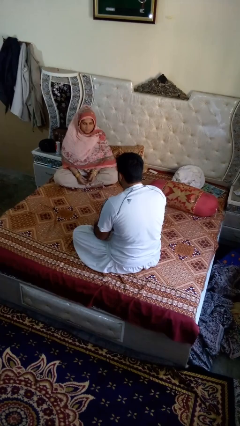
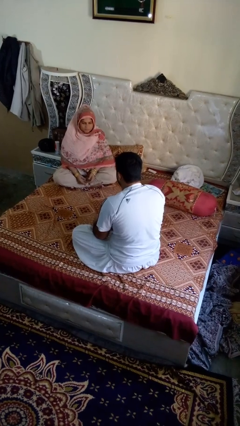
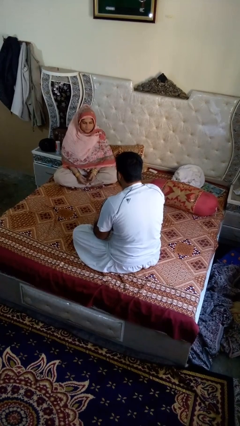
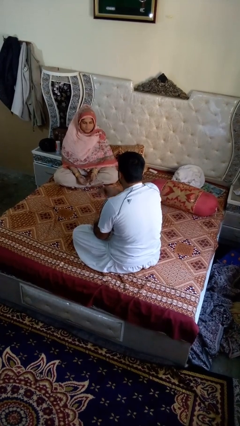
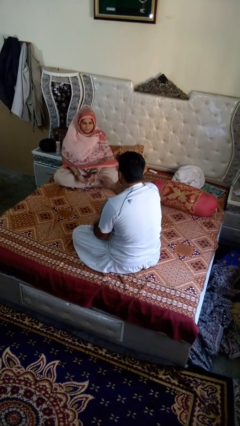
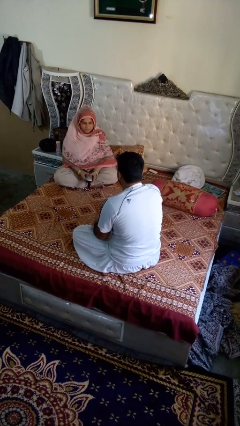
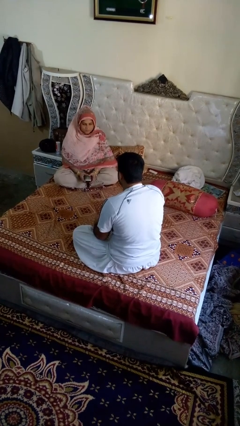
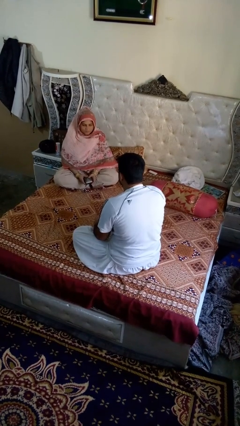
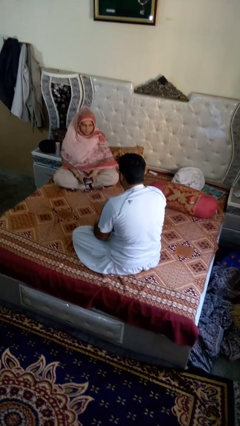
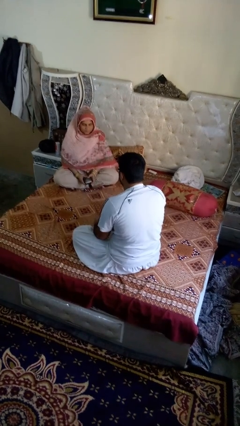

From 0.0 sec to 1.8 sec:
person throws object to person

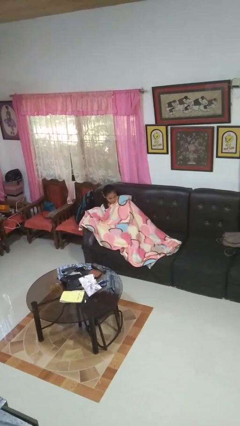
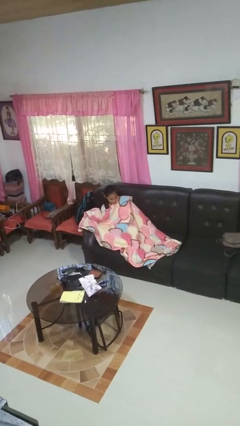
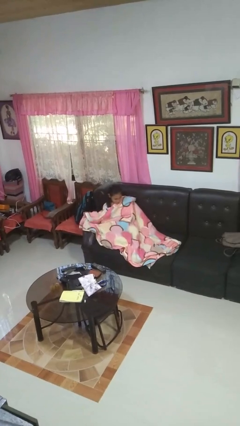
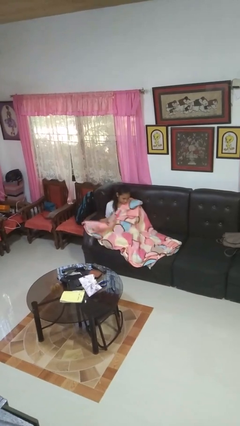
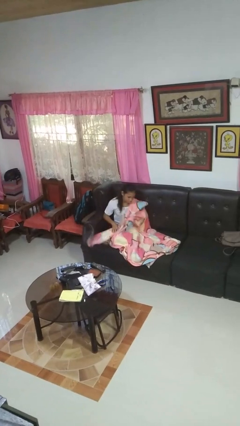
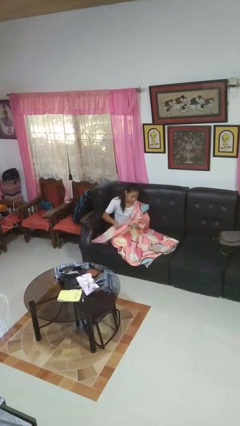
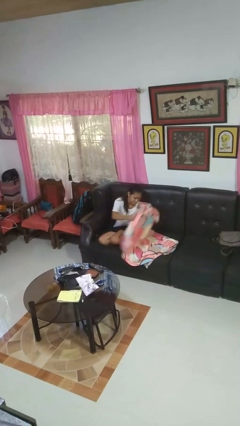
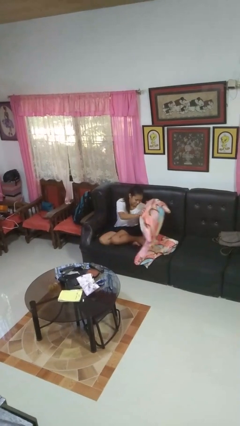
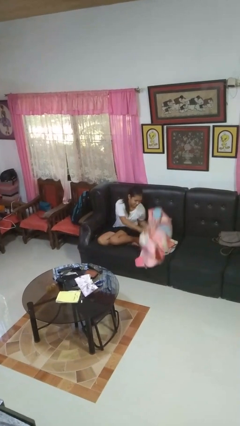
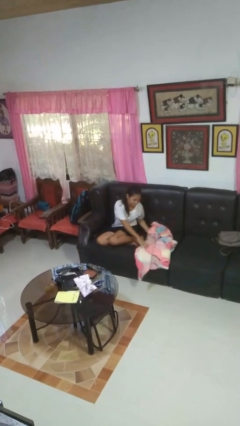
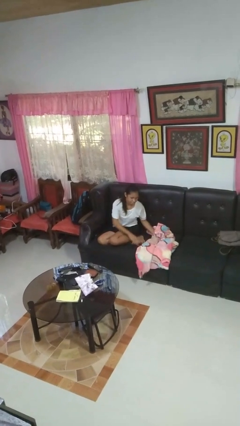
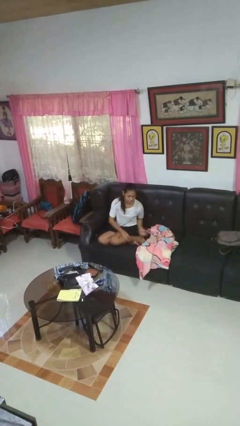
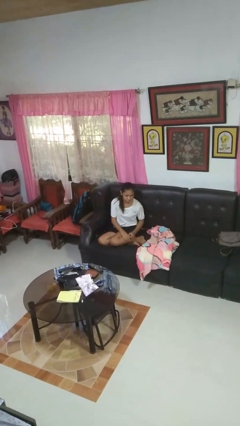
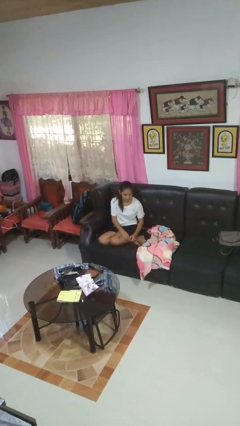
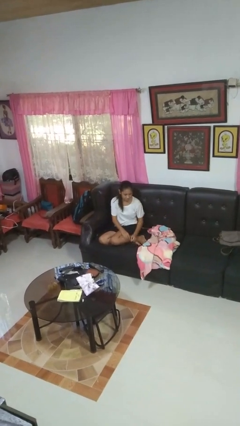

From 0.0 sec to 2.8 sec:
person uncovers with blanket

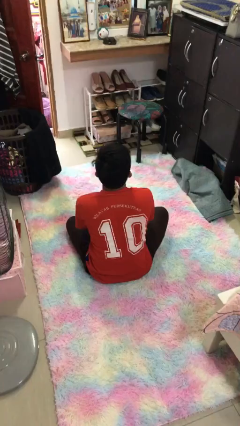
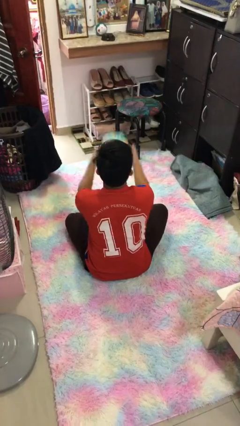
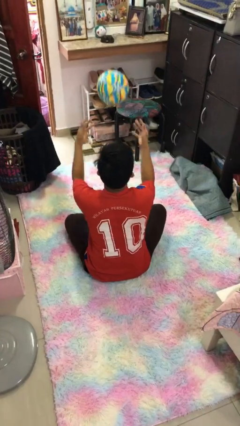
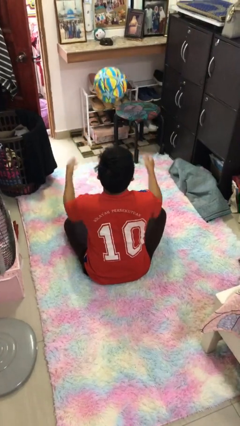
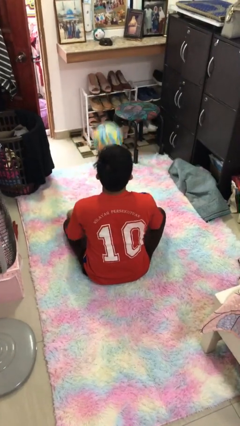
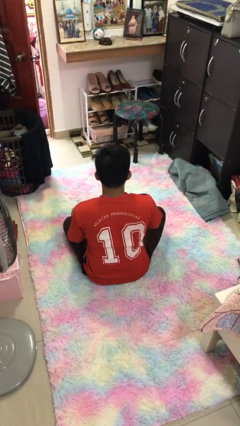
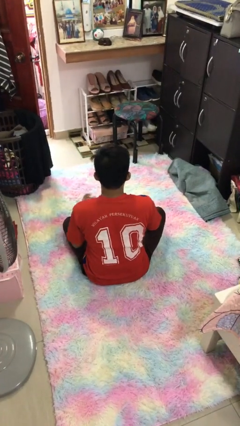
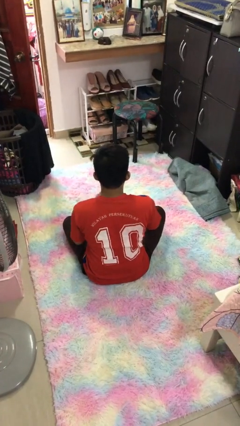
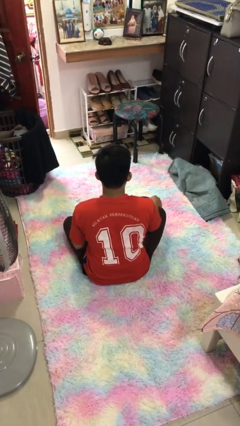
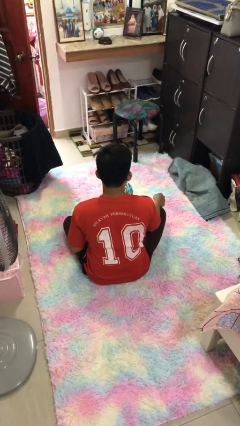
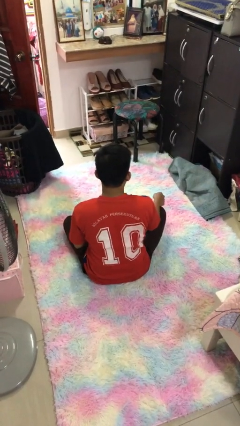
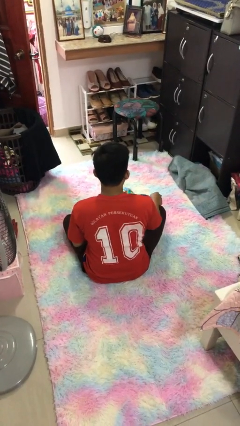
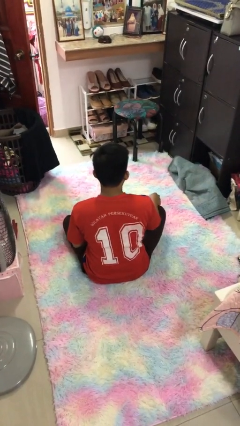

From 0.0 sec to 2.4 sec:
person bounces ball on floor

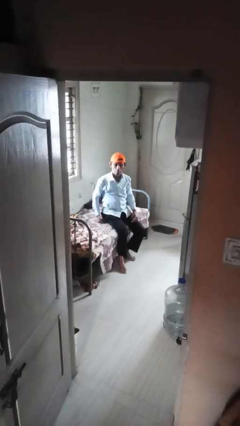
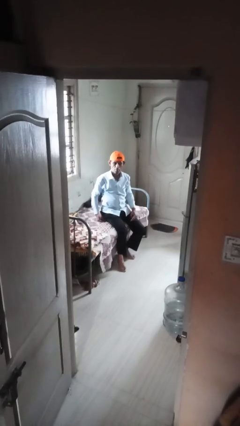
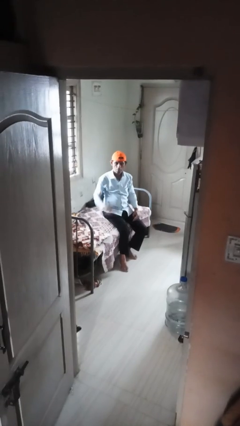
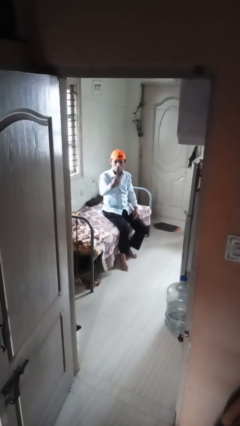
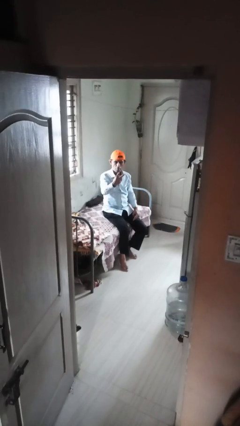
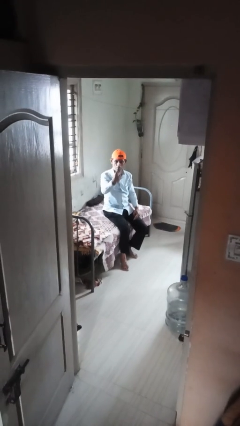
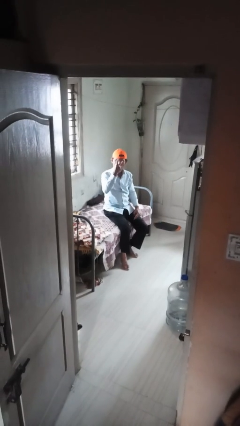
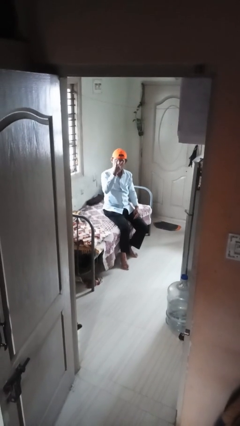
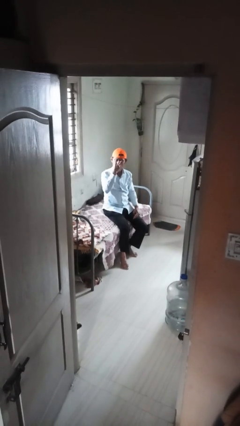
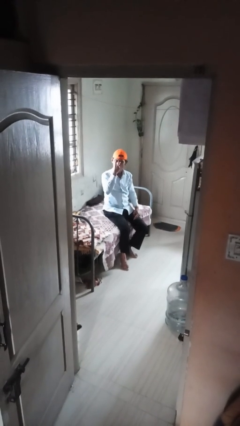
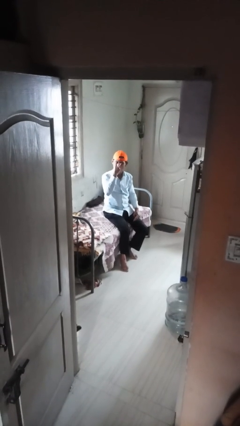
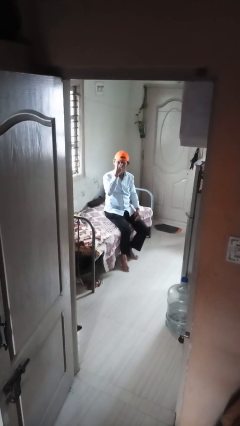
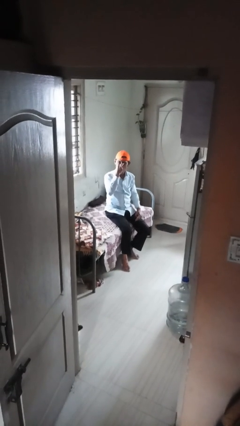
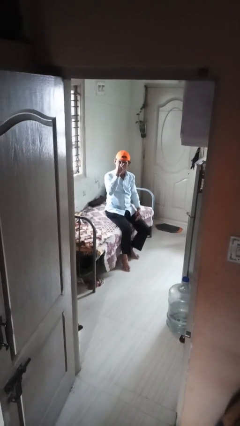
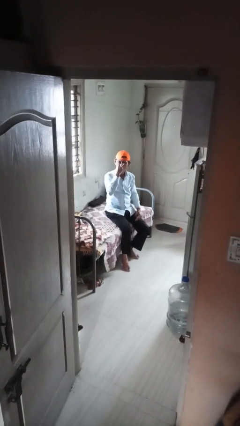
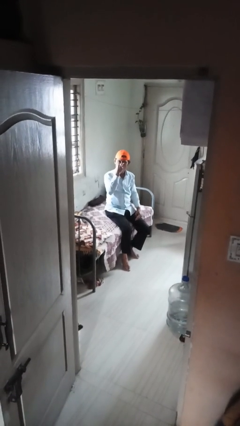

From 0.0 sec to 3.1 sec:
person gestures watch closely

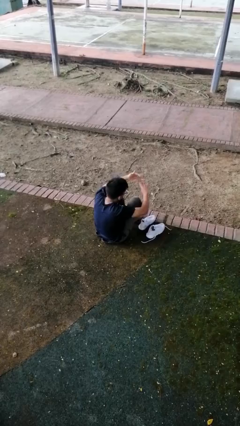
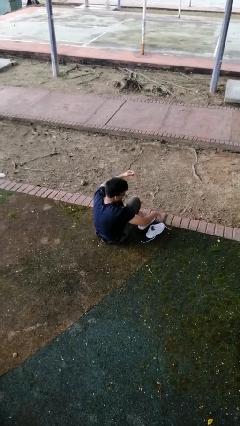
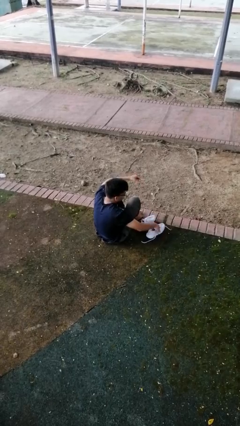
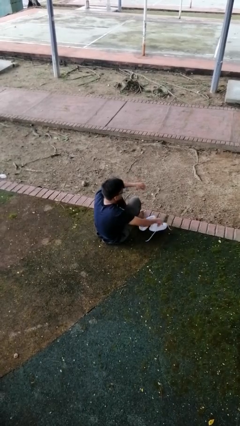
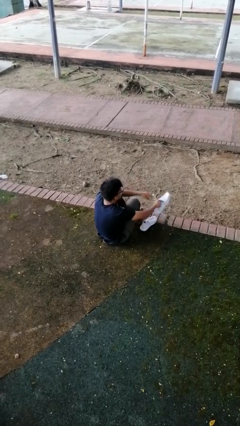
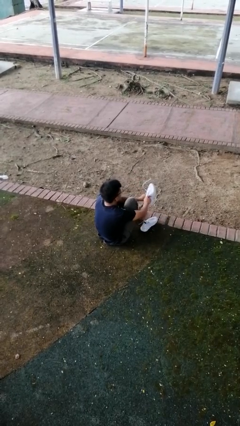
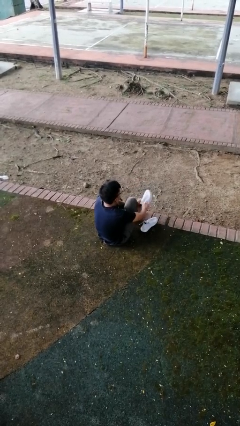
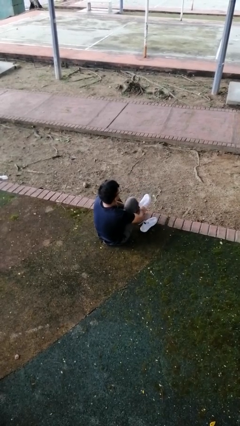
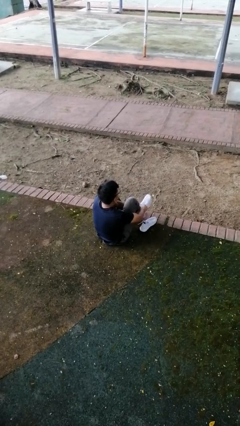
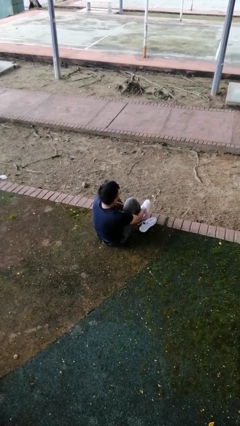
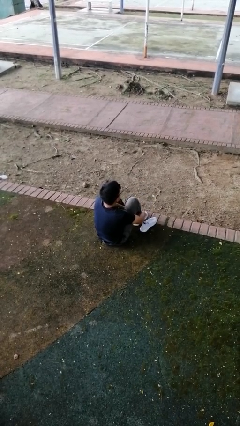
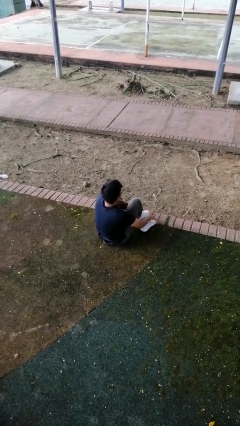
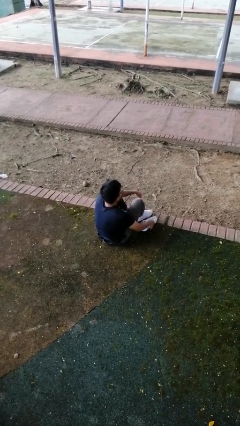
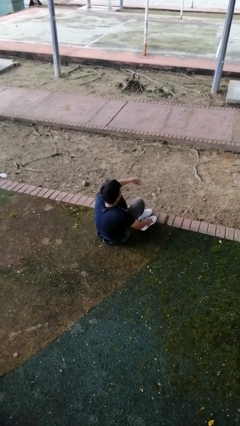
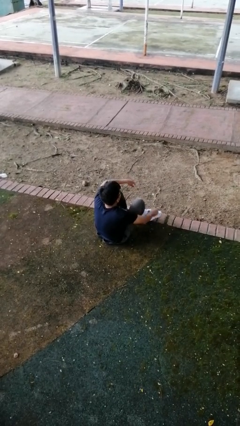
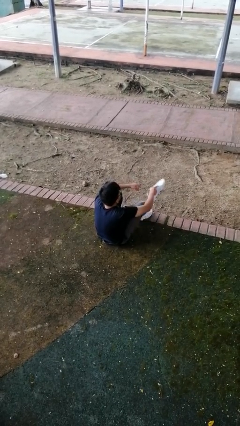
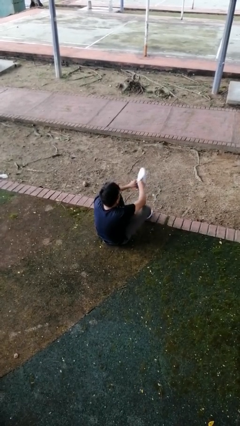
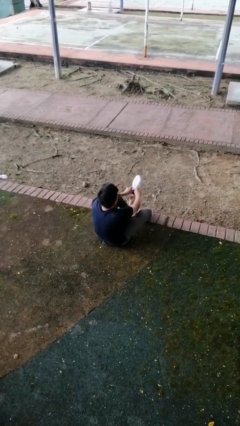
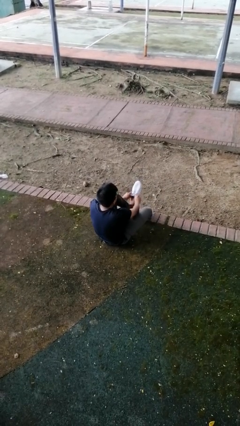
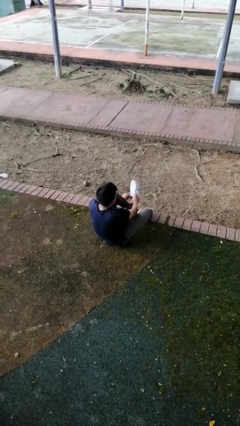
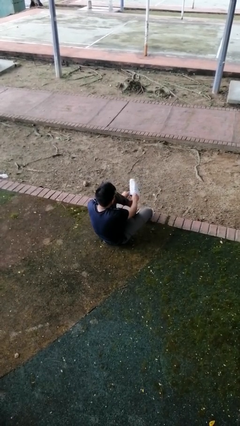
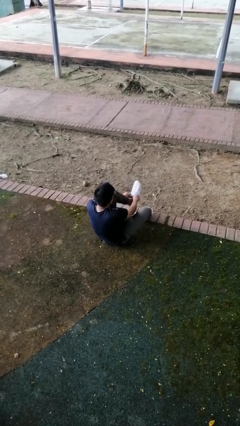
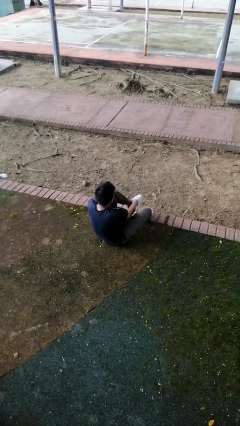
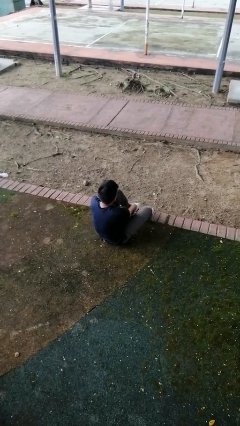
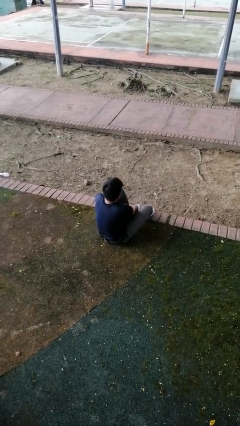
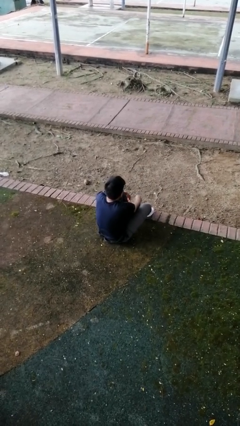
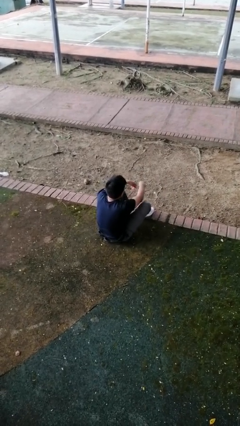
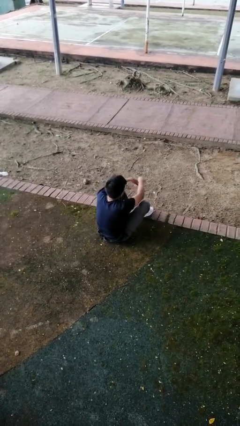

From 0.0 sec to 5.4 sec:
person puts on shoes

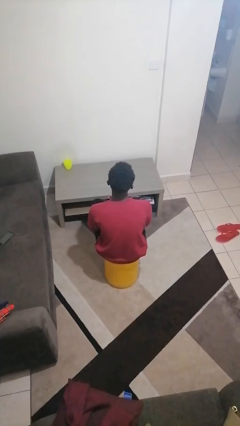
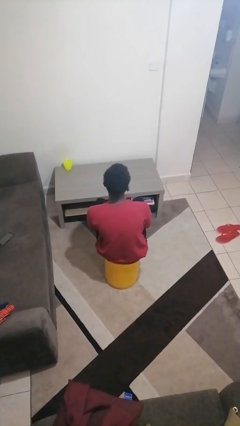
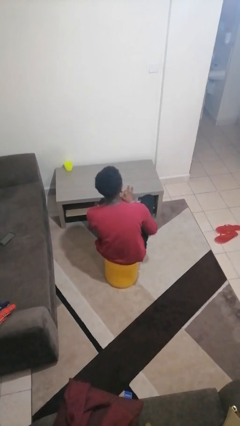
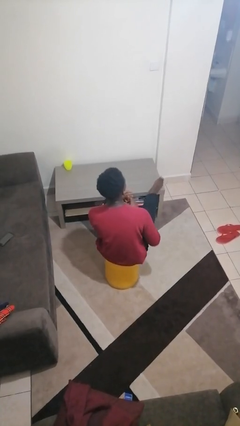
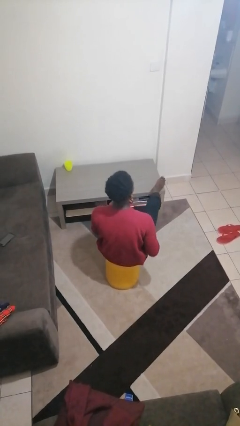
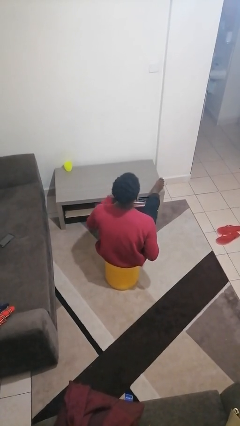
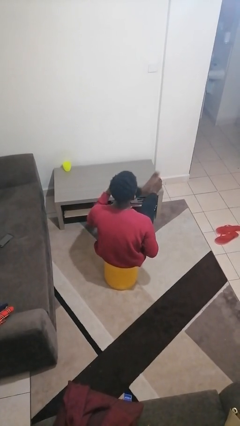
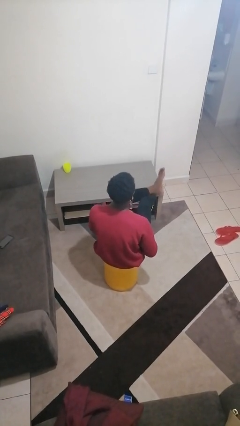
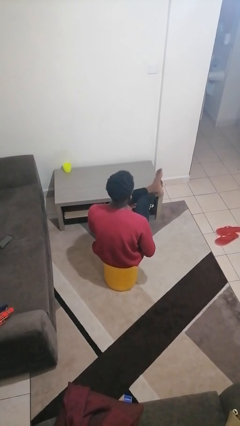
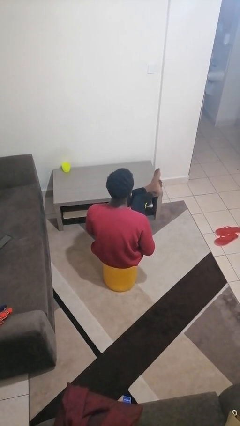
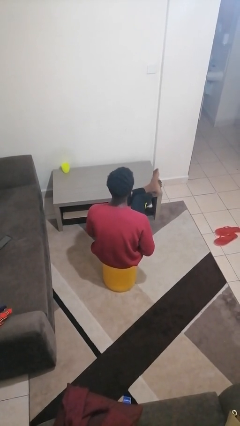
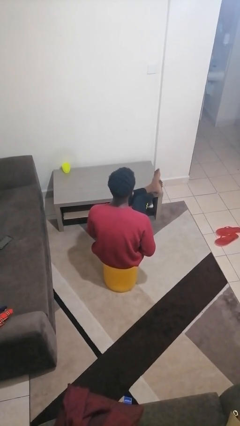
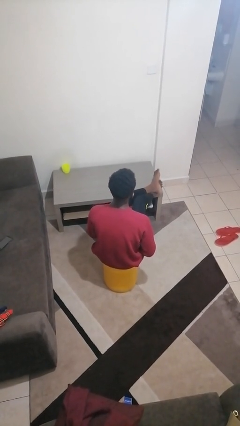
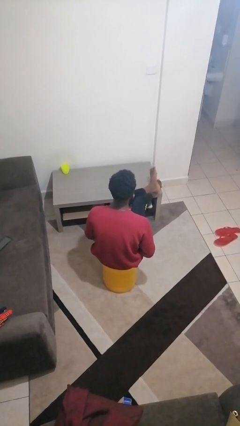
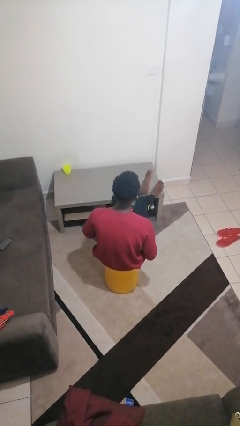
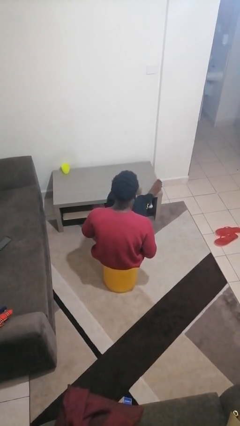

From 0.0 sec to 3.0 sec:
person puts feet up
